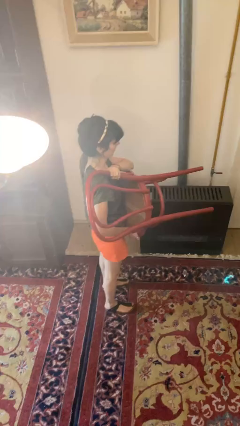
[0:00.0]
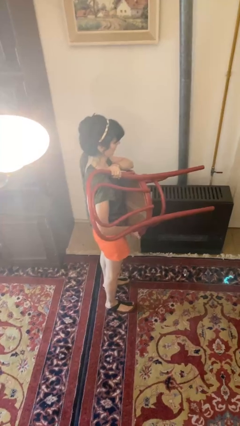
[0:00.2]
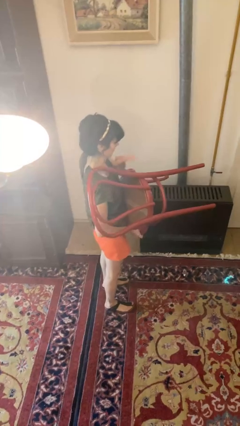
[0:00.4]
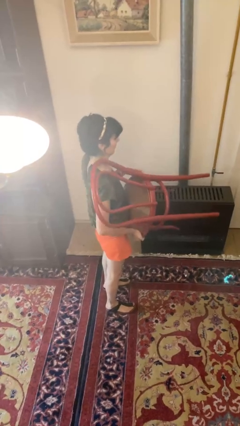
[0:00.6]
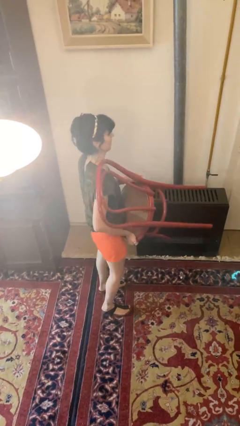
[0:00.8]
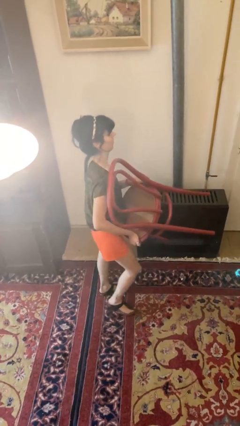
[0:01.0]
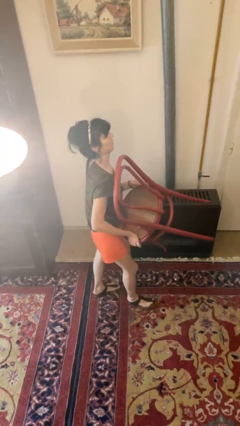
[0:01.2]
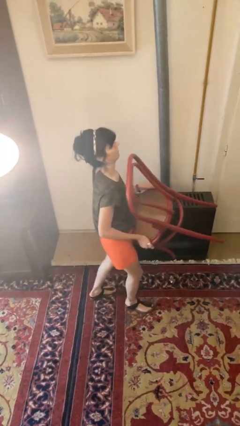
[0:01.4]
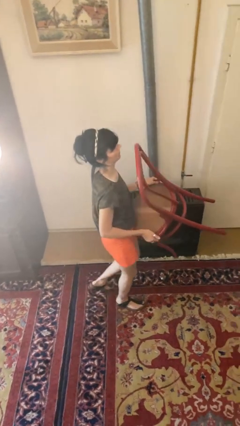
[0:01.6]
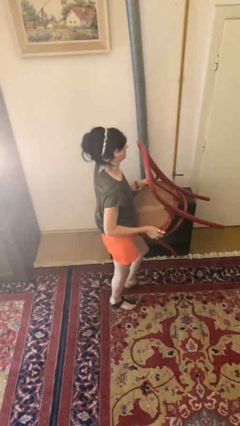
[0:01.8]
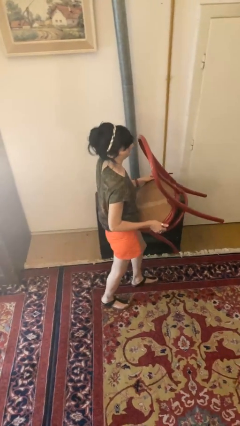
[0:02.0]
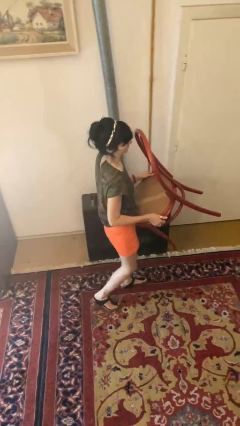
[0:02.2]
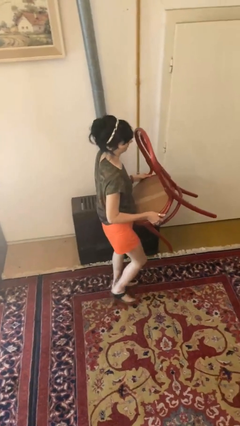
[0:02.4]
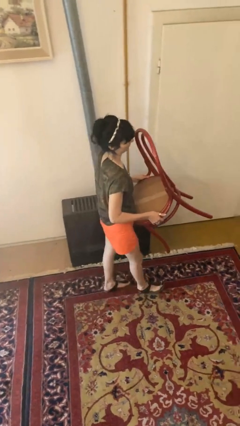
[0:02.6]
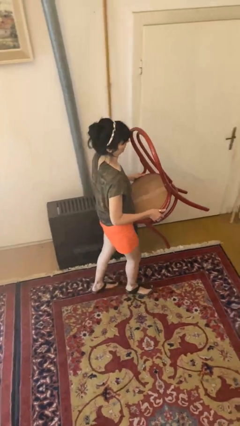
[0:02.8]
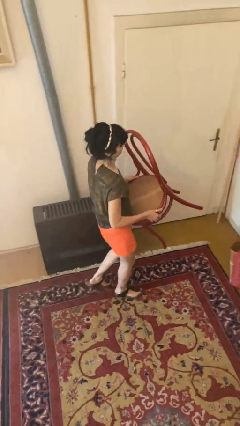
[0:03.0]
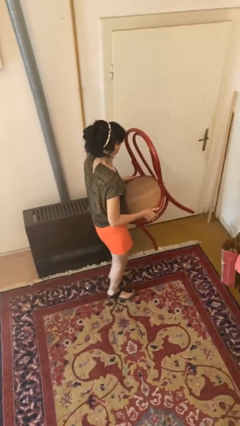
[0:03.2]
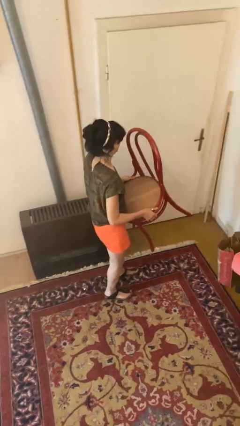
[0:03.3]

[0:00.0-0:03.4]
person carries furniture

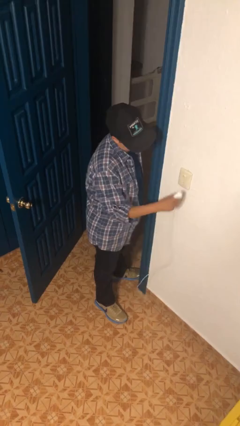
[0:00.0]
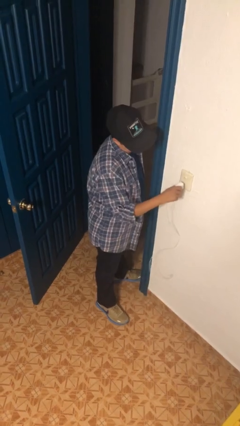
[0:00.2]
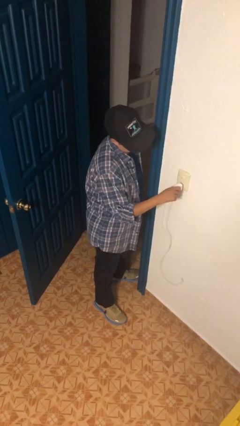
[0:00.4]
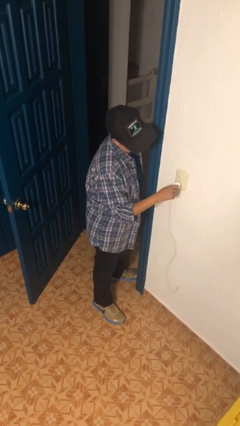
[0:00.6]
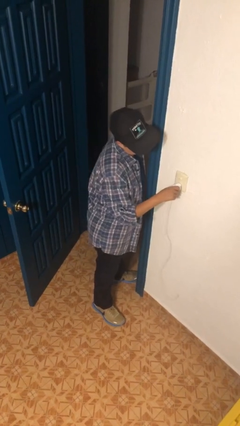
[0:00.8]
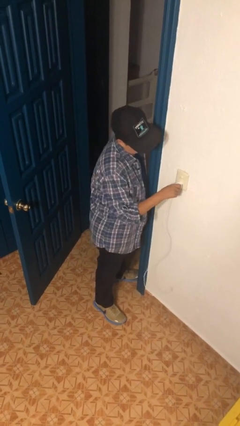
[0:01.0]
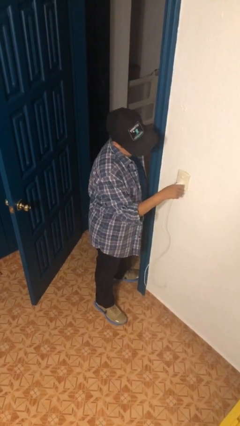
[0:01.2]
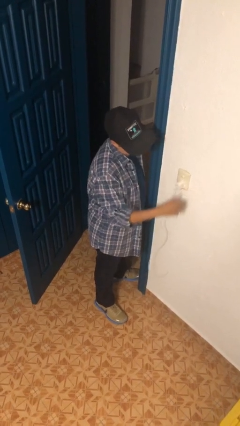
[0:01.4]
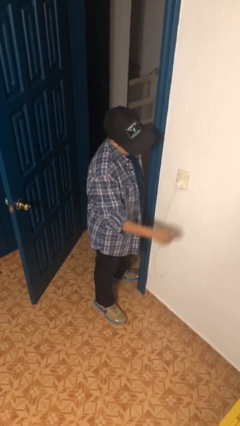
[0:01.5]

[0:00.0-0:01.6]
person plugs into electrical socket

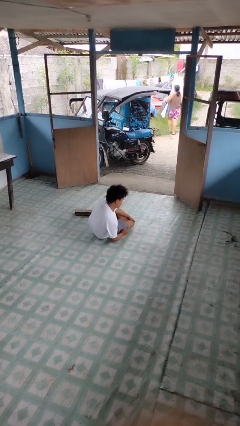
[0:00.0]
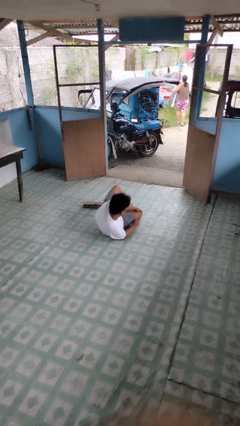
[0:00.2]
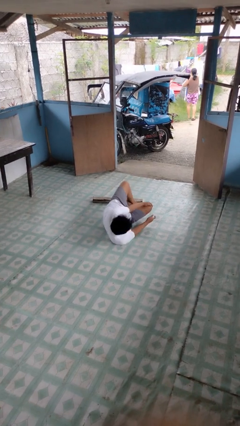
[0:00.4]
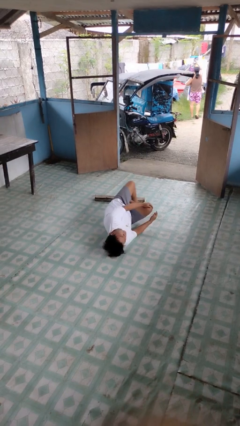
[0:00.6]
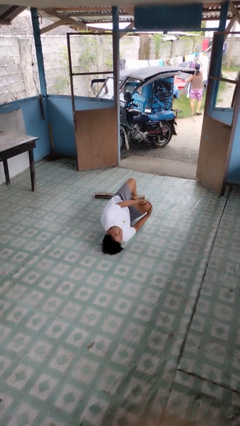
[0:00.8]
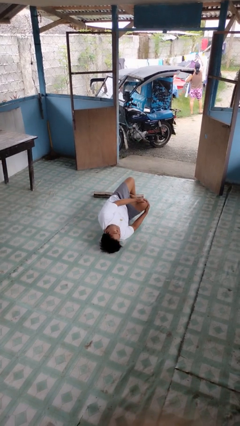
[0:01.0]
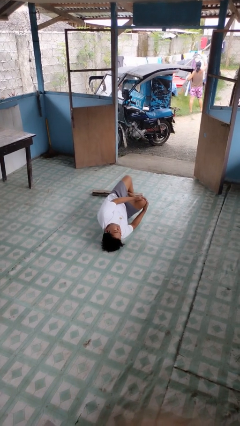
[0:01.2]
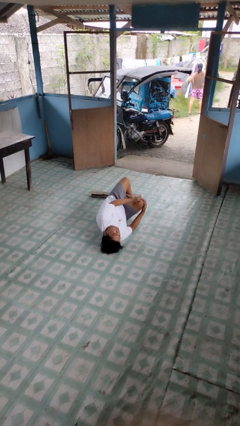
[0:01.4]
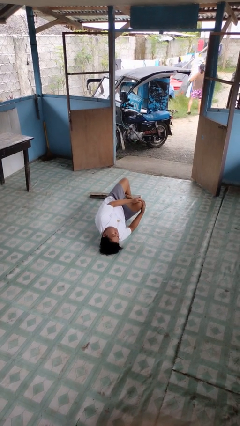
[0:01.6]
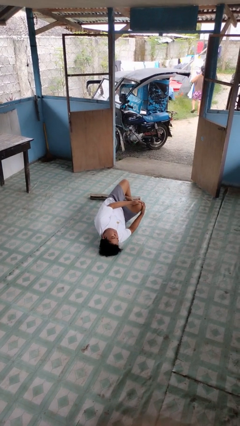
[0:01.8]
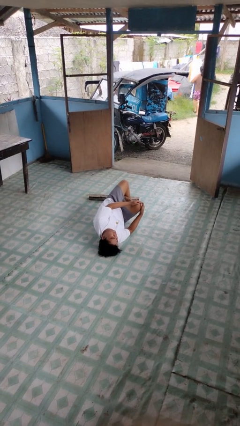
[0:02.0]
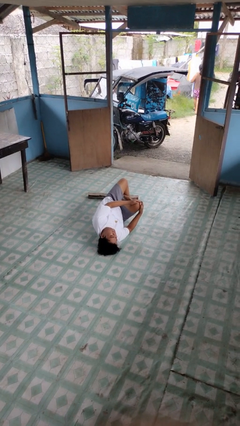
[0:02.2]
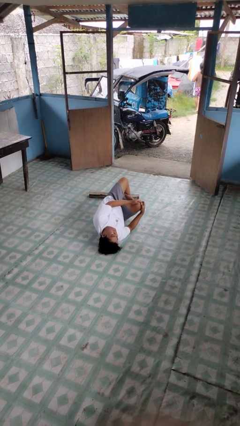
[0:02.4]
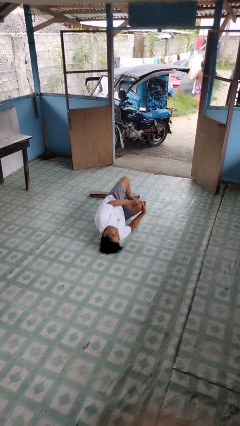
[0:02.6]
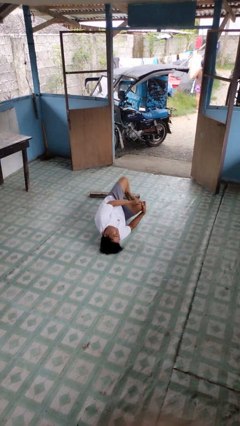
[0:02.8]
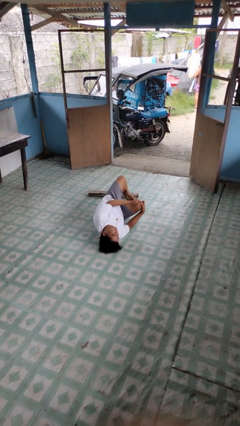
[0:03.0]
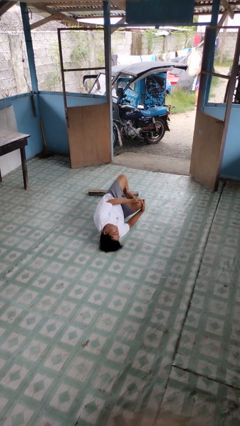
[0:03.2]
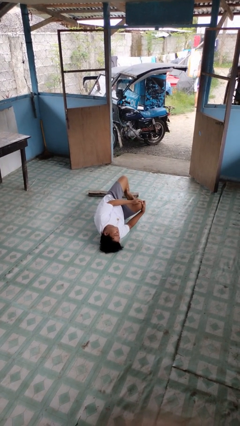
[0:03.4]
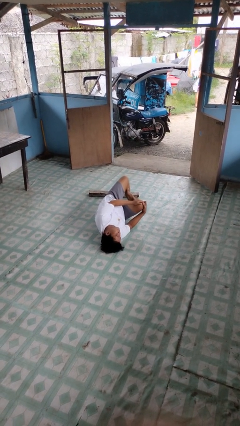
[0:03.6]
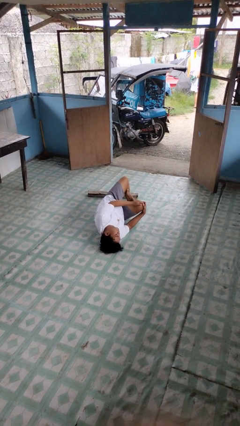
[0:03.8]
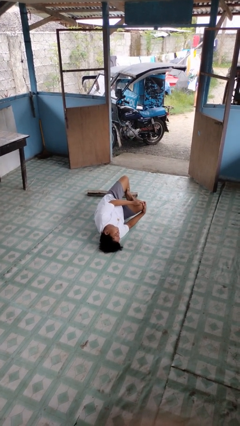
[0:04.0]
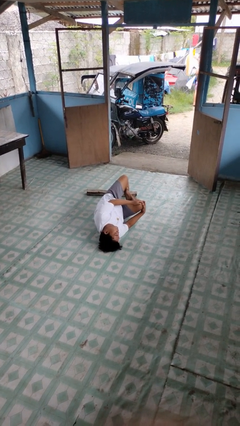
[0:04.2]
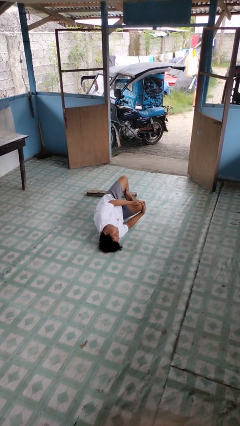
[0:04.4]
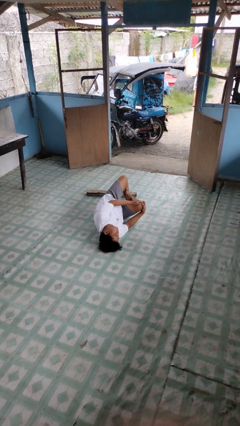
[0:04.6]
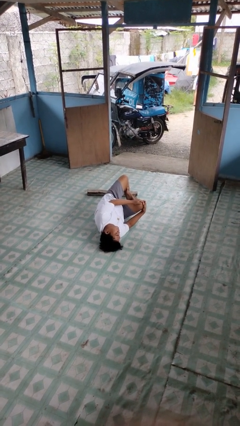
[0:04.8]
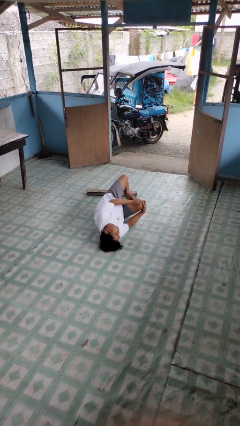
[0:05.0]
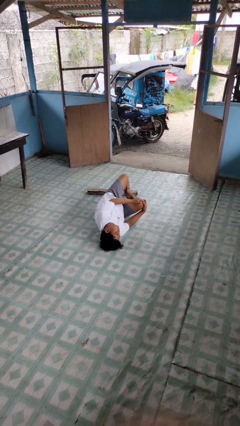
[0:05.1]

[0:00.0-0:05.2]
person lies down on floor

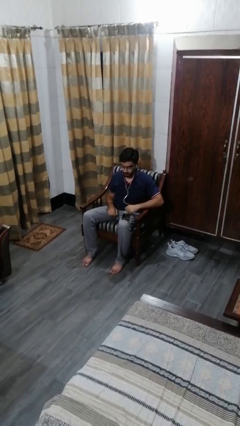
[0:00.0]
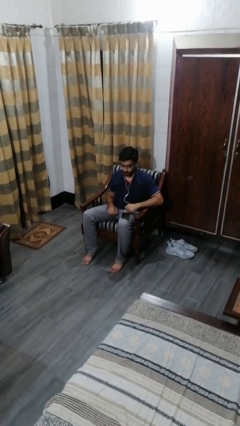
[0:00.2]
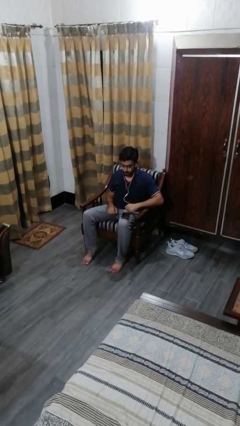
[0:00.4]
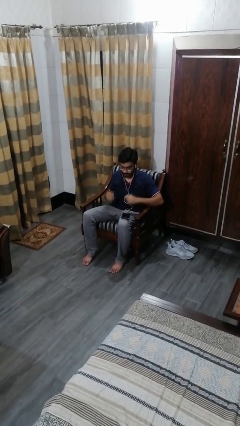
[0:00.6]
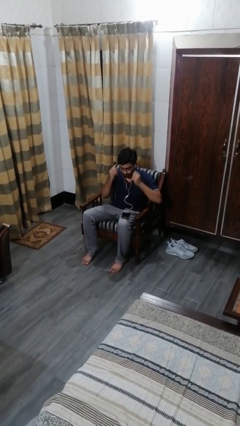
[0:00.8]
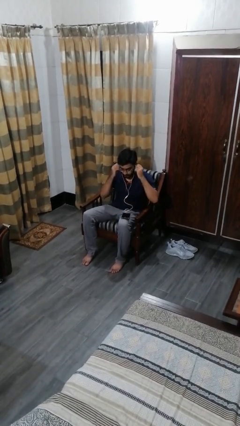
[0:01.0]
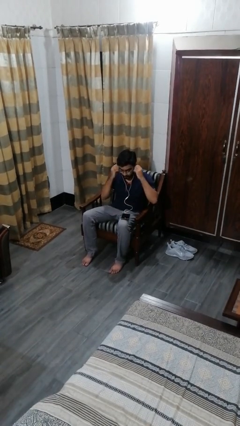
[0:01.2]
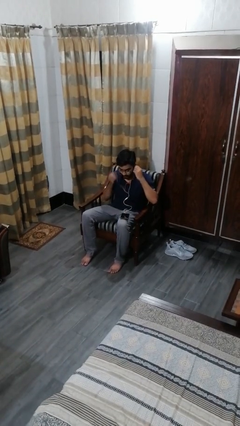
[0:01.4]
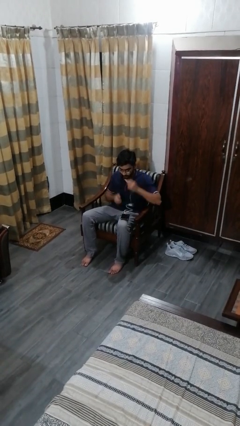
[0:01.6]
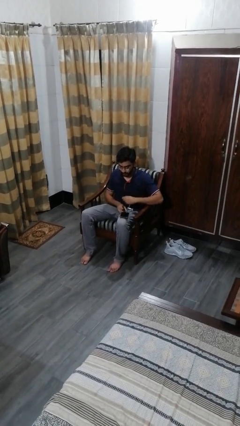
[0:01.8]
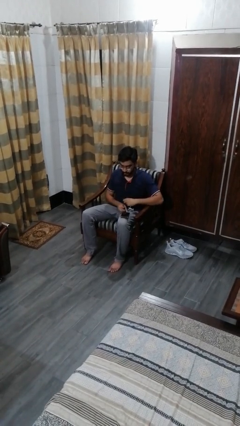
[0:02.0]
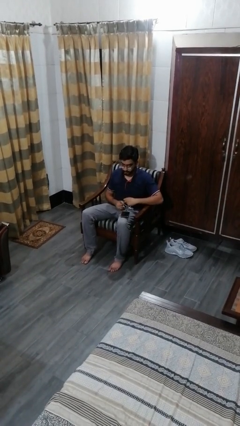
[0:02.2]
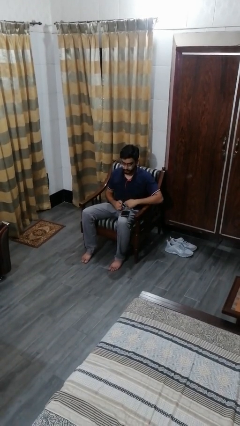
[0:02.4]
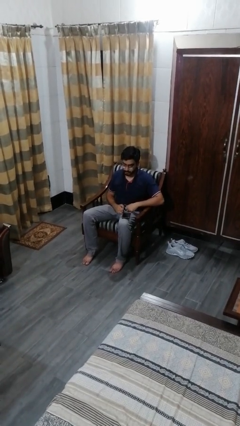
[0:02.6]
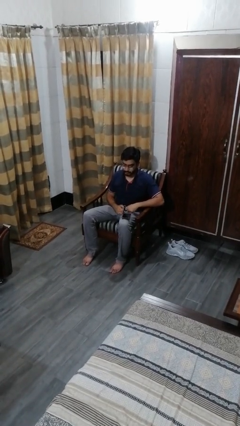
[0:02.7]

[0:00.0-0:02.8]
person takes off headphones

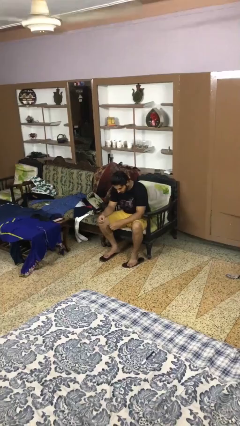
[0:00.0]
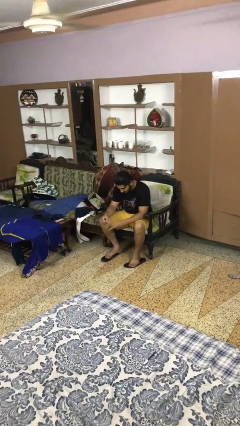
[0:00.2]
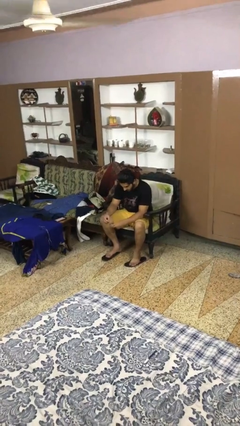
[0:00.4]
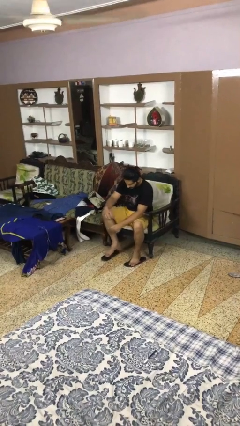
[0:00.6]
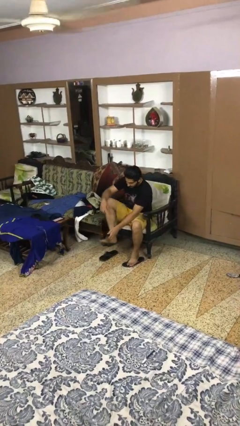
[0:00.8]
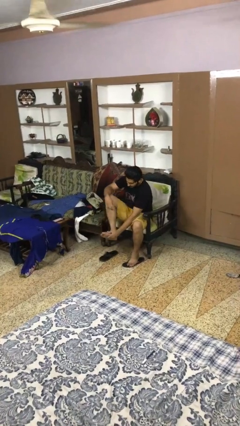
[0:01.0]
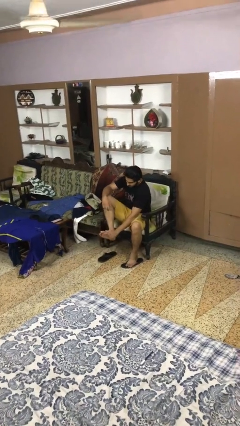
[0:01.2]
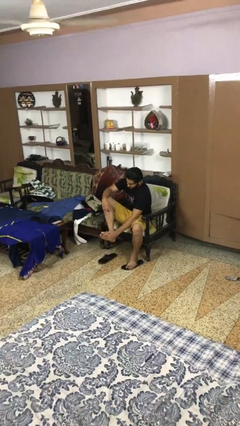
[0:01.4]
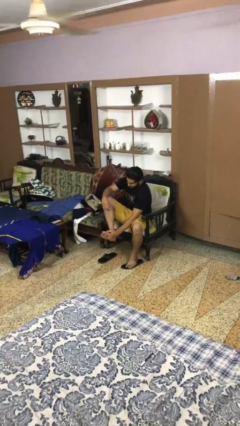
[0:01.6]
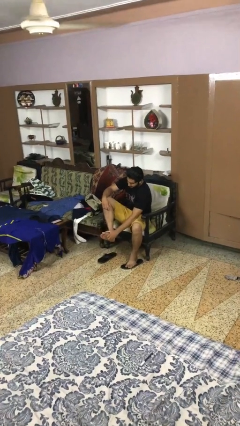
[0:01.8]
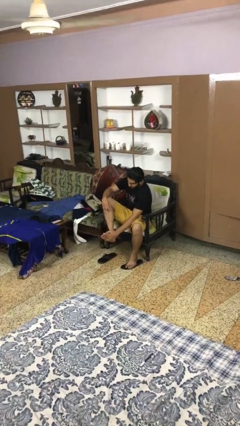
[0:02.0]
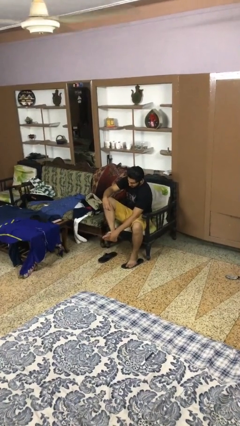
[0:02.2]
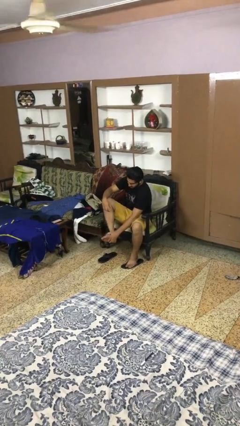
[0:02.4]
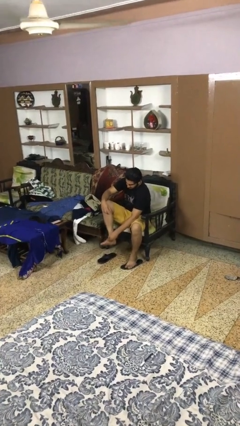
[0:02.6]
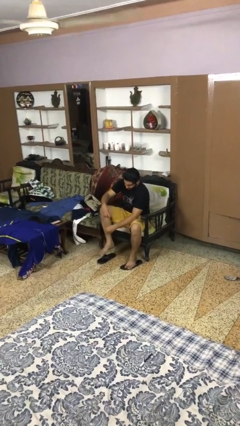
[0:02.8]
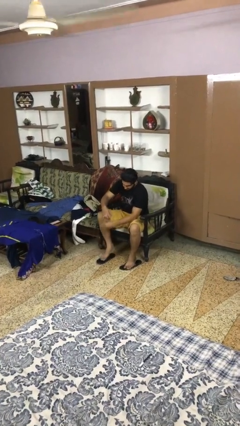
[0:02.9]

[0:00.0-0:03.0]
person rubs foot

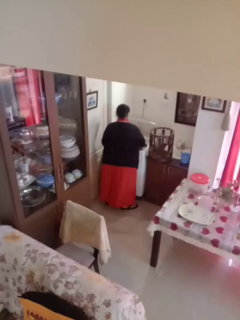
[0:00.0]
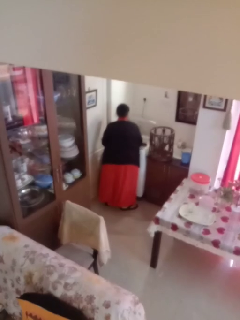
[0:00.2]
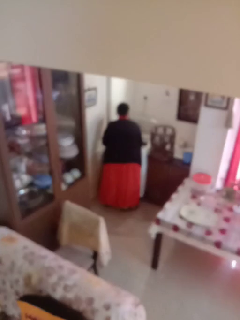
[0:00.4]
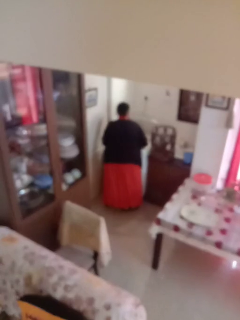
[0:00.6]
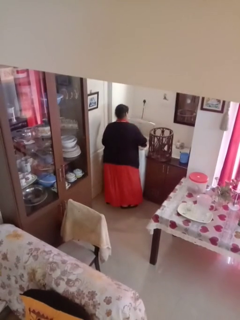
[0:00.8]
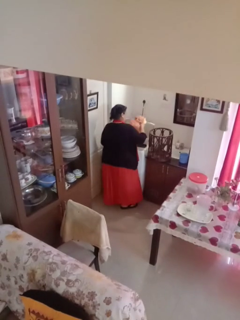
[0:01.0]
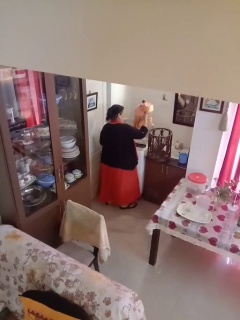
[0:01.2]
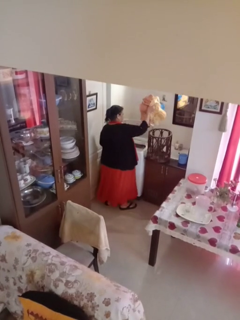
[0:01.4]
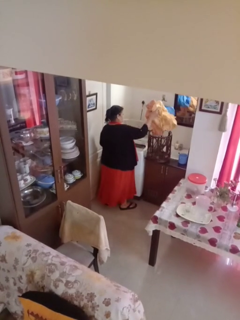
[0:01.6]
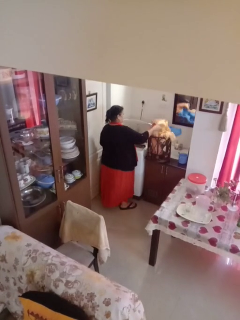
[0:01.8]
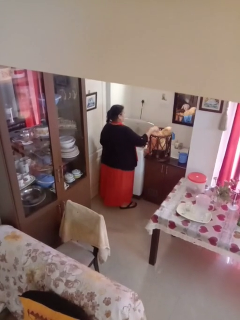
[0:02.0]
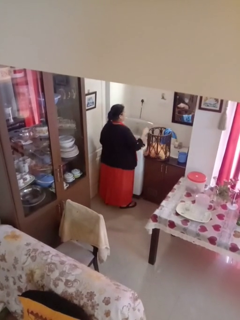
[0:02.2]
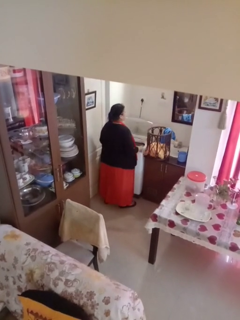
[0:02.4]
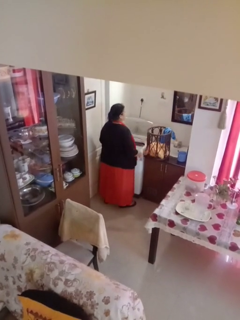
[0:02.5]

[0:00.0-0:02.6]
person loads clotheswasher
